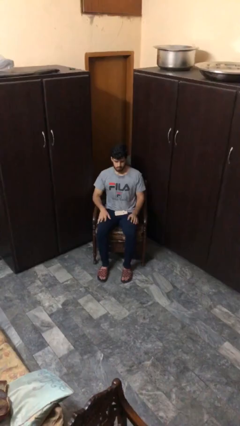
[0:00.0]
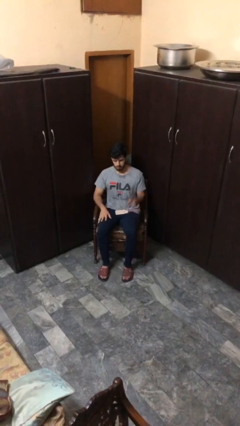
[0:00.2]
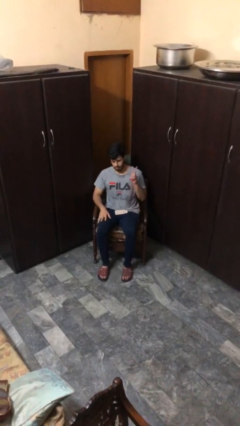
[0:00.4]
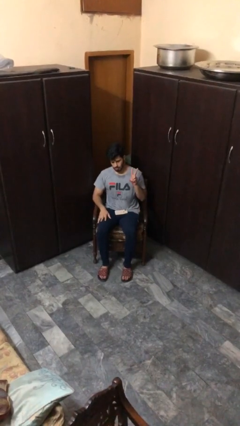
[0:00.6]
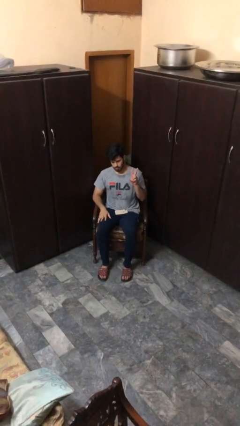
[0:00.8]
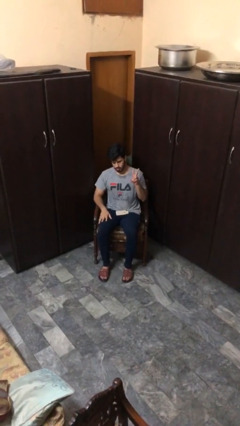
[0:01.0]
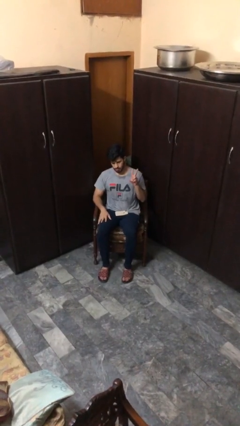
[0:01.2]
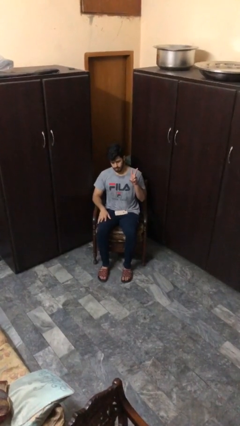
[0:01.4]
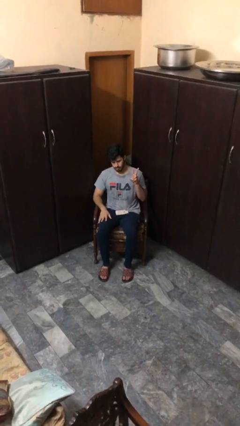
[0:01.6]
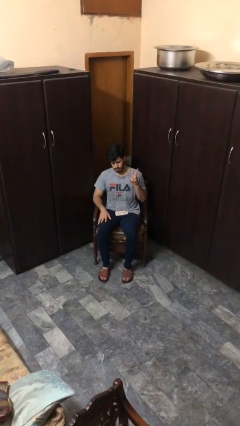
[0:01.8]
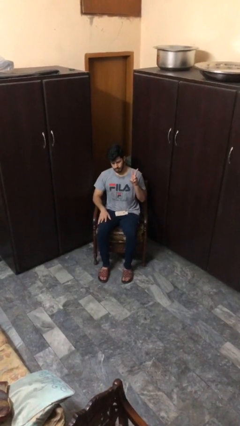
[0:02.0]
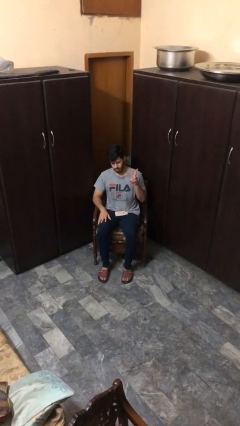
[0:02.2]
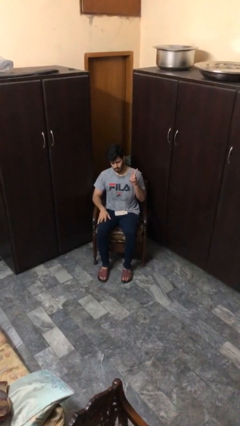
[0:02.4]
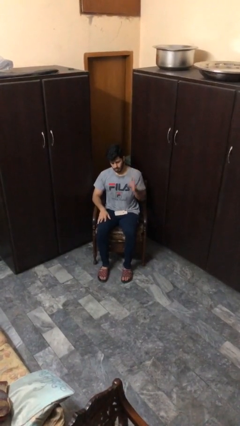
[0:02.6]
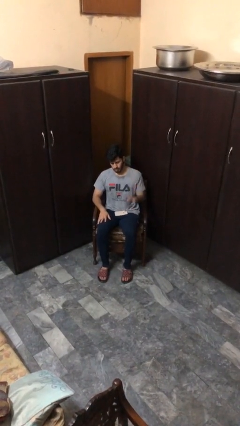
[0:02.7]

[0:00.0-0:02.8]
person gestures peace

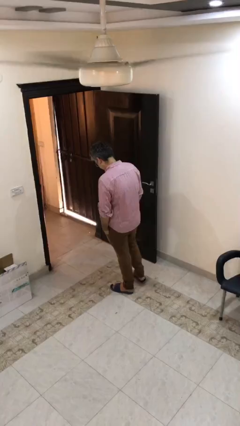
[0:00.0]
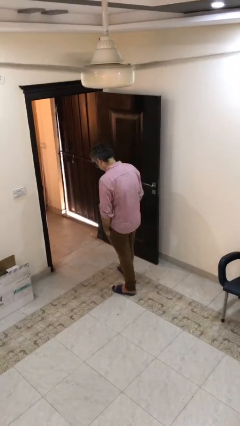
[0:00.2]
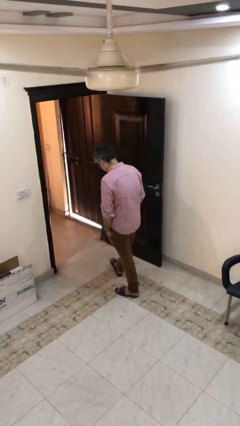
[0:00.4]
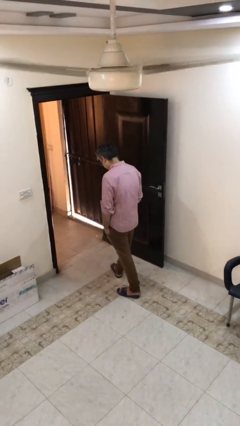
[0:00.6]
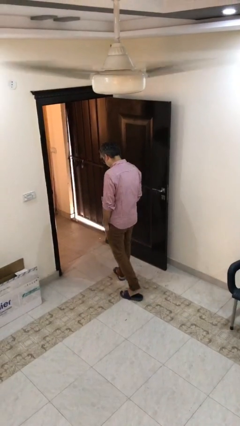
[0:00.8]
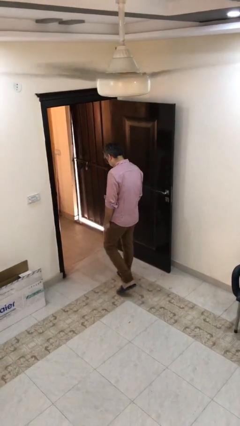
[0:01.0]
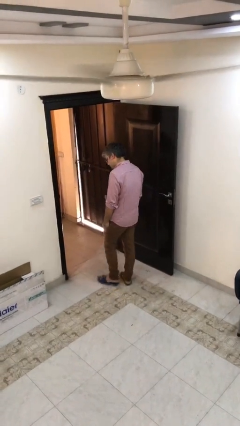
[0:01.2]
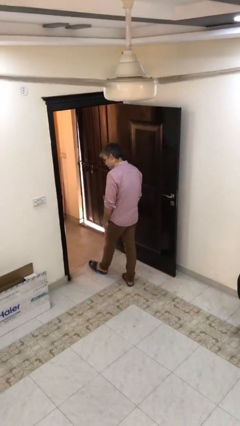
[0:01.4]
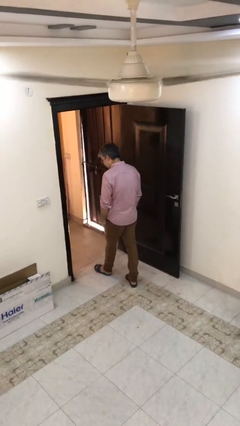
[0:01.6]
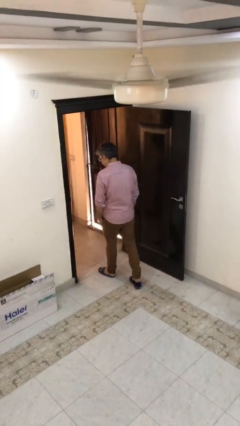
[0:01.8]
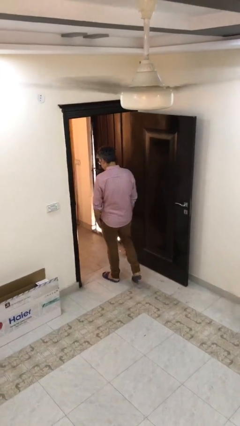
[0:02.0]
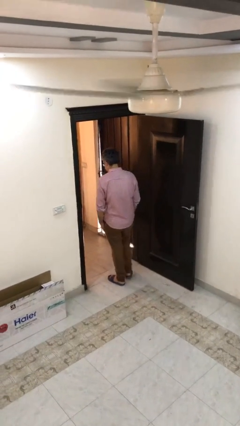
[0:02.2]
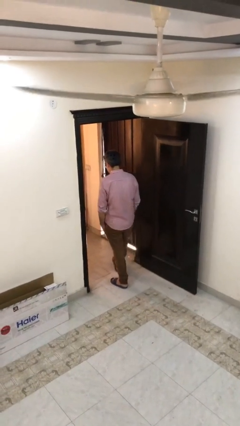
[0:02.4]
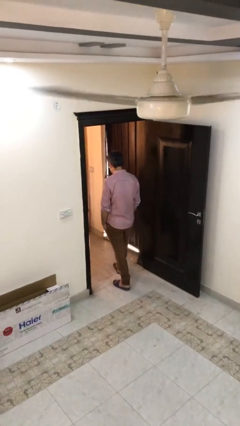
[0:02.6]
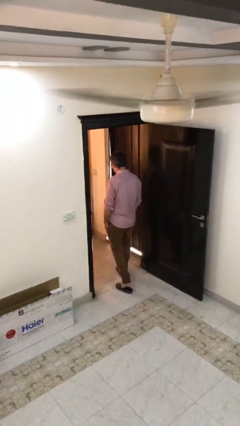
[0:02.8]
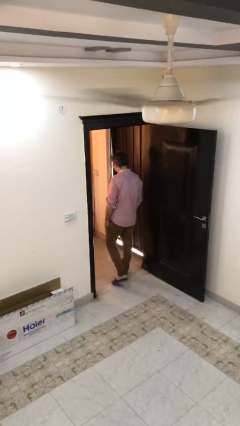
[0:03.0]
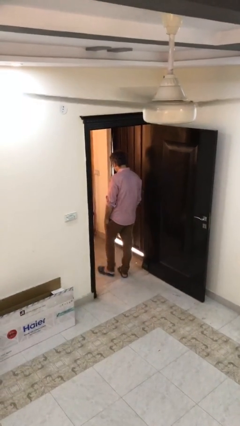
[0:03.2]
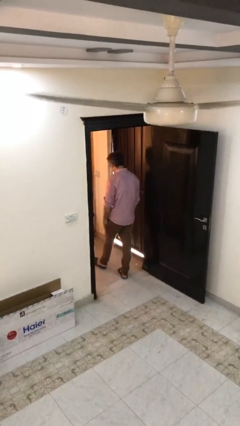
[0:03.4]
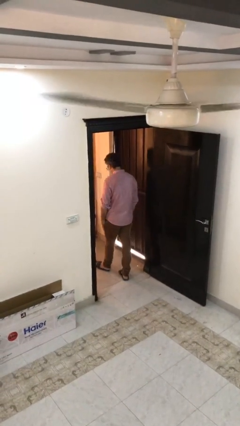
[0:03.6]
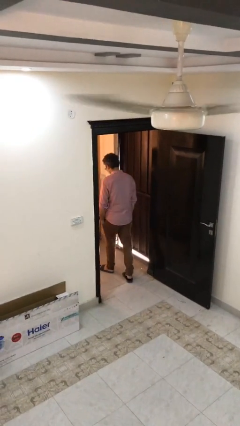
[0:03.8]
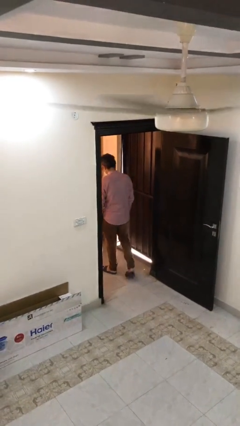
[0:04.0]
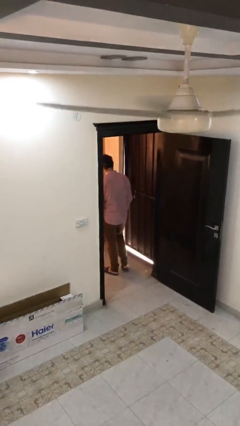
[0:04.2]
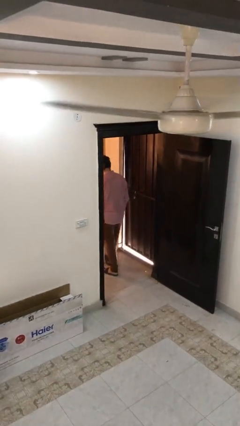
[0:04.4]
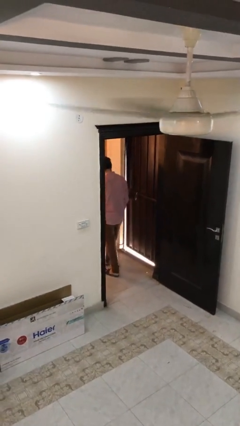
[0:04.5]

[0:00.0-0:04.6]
person exits scene through structure

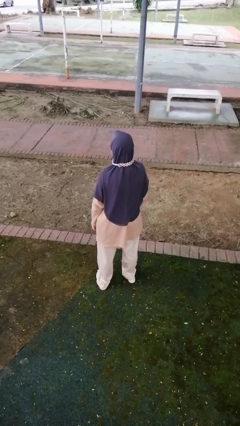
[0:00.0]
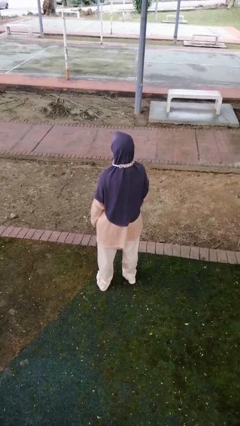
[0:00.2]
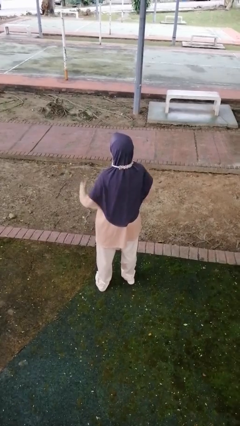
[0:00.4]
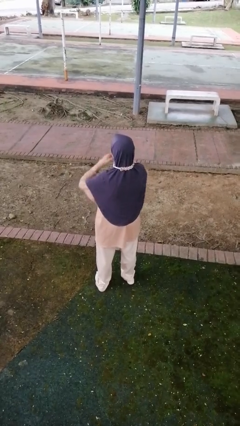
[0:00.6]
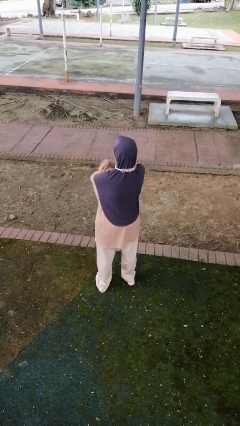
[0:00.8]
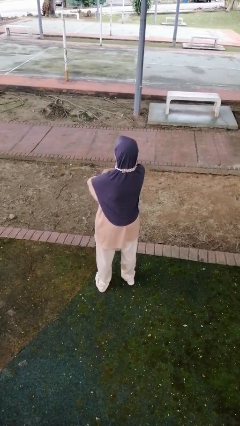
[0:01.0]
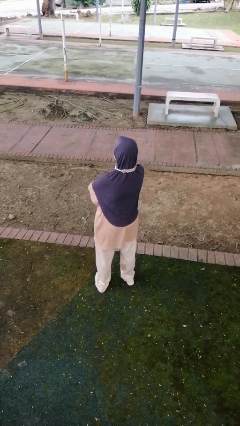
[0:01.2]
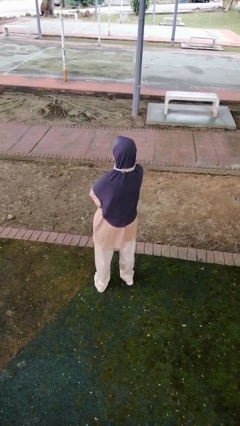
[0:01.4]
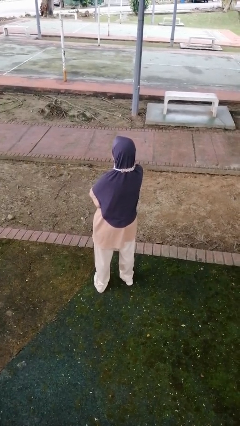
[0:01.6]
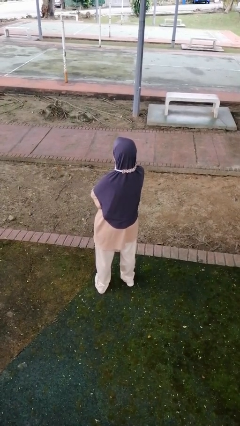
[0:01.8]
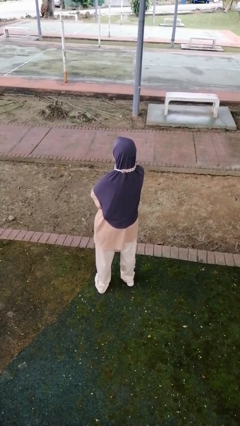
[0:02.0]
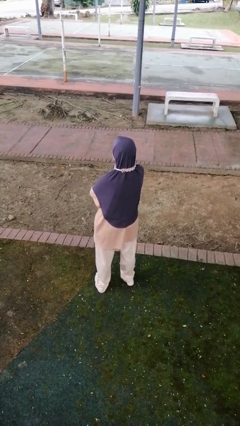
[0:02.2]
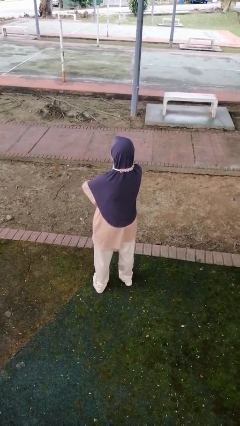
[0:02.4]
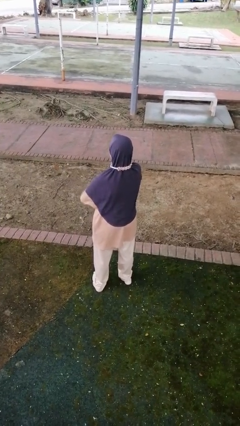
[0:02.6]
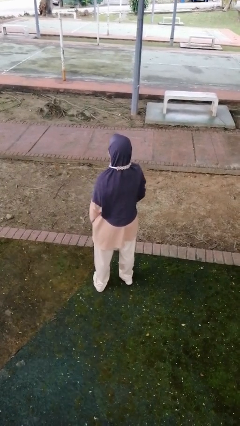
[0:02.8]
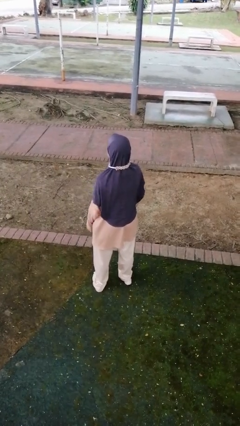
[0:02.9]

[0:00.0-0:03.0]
person crosses arms

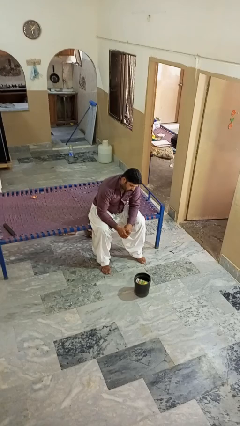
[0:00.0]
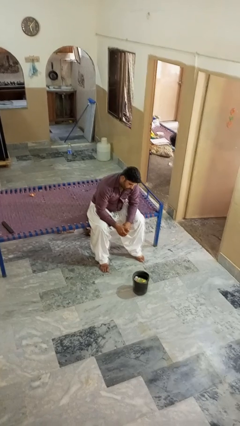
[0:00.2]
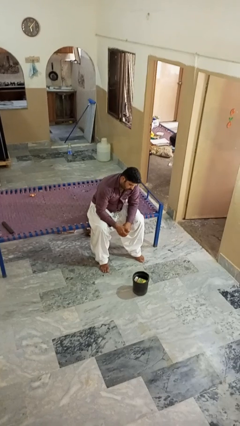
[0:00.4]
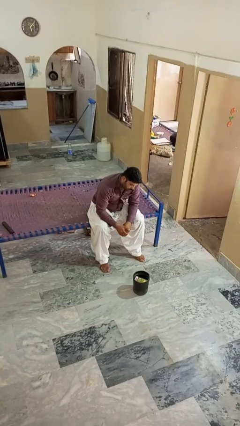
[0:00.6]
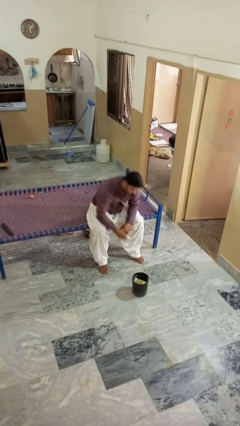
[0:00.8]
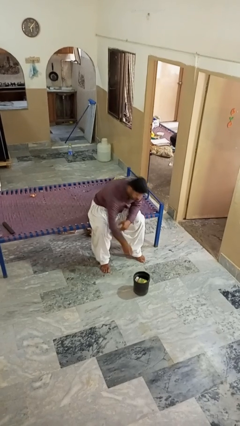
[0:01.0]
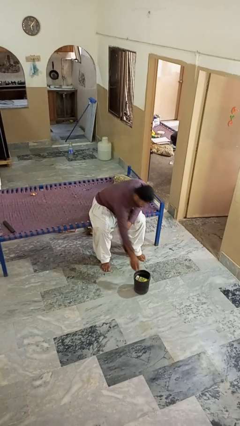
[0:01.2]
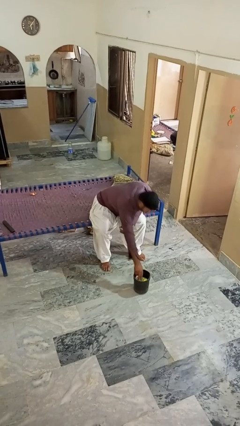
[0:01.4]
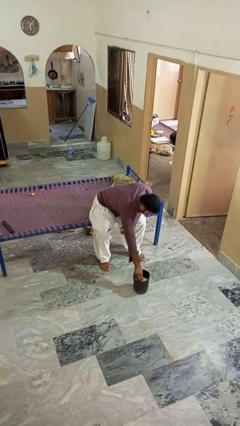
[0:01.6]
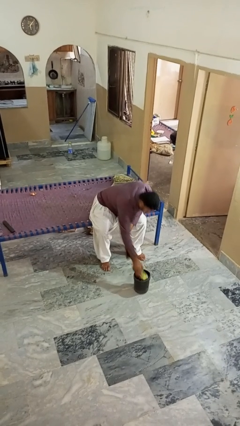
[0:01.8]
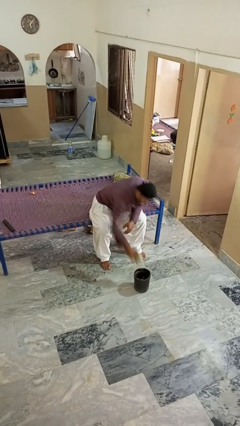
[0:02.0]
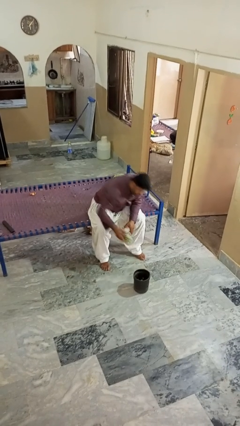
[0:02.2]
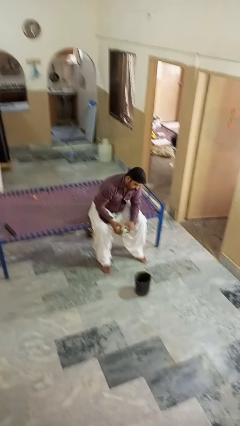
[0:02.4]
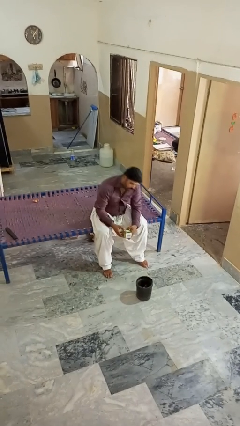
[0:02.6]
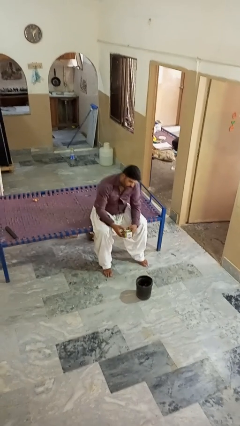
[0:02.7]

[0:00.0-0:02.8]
person takes object from basket

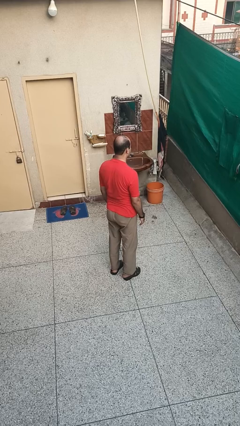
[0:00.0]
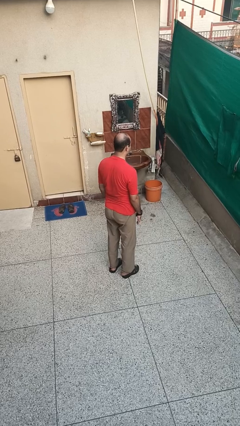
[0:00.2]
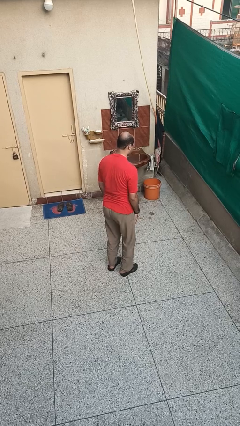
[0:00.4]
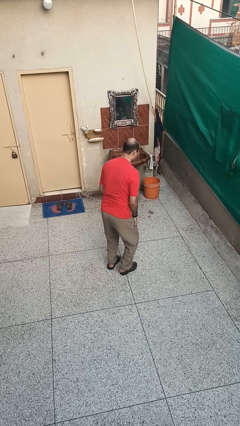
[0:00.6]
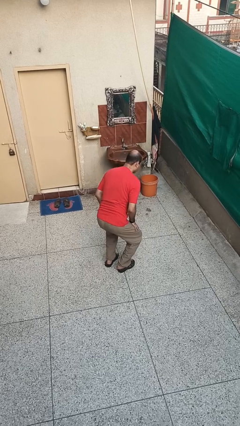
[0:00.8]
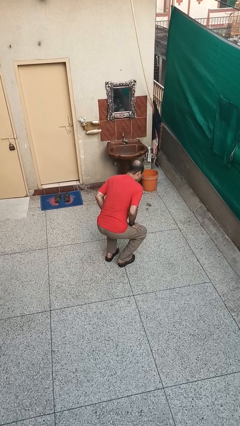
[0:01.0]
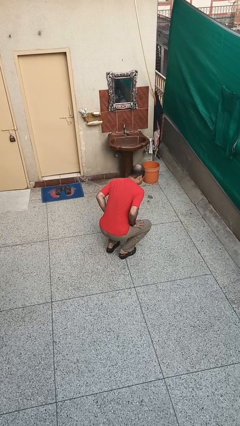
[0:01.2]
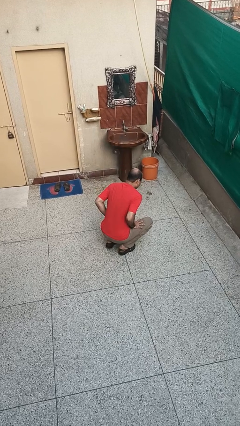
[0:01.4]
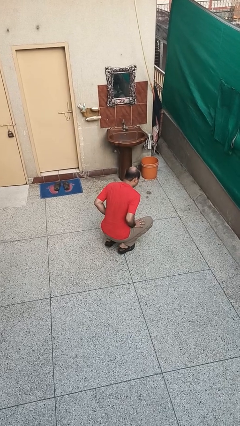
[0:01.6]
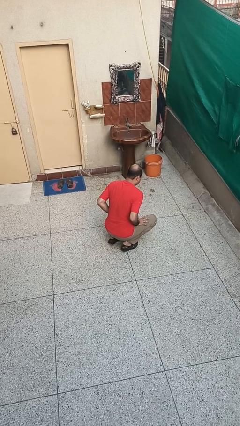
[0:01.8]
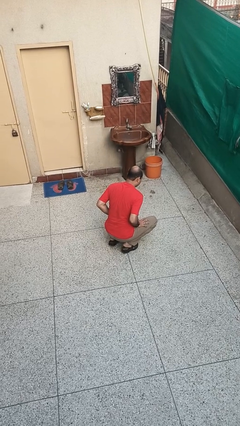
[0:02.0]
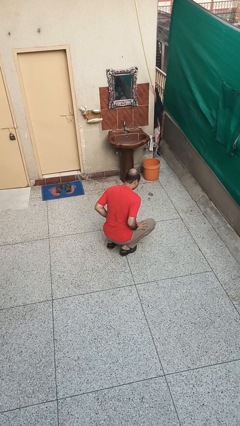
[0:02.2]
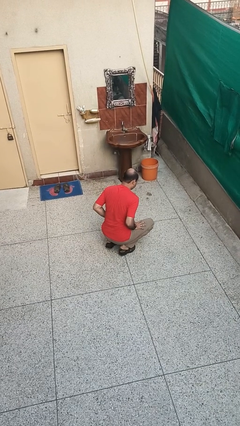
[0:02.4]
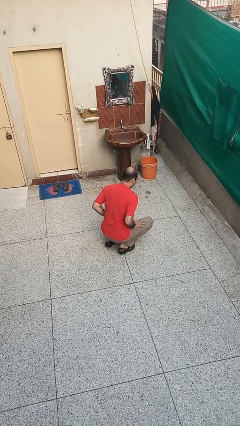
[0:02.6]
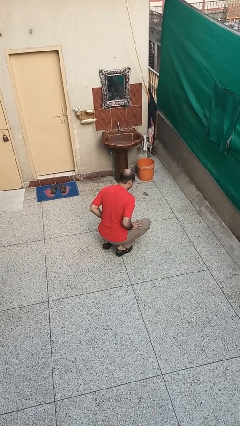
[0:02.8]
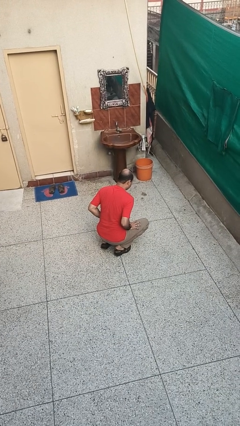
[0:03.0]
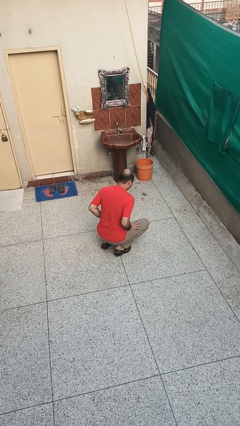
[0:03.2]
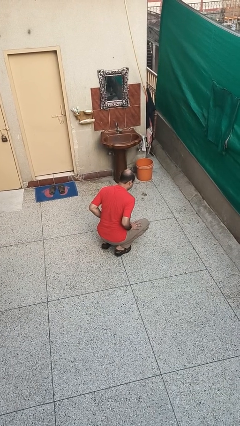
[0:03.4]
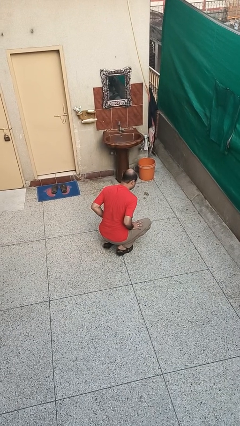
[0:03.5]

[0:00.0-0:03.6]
person squats

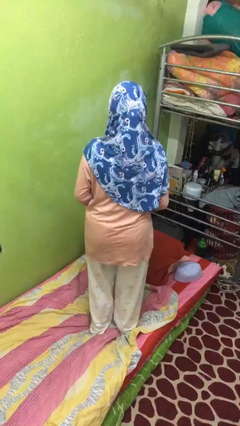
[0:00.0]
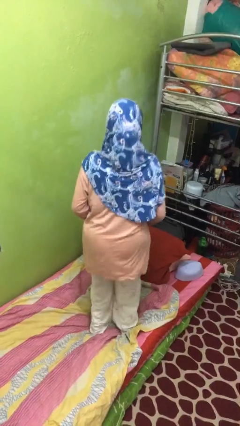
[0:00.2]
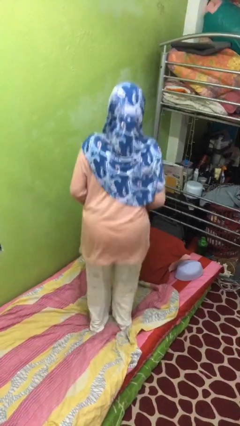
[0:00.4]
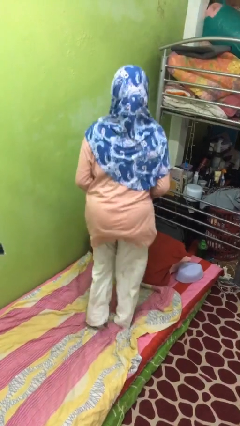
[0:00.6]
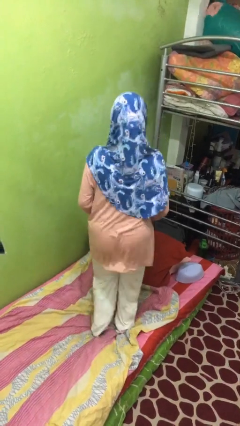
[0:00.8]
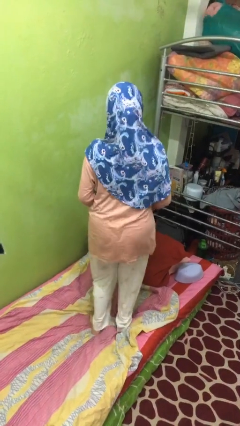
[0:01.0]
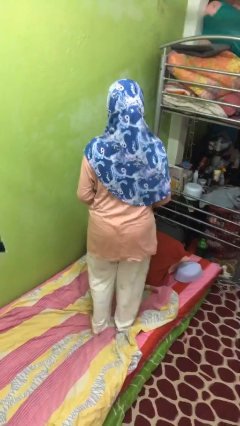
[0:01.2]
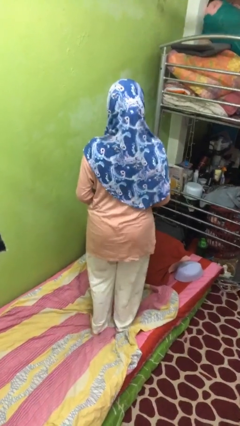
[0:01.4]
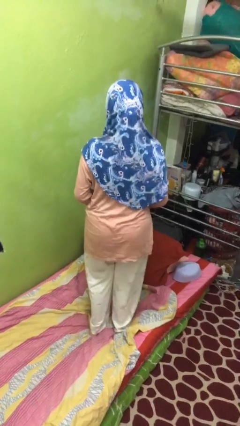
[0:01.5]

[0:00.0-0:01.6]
person jumps on bed
